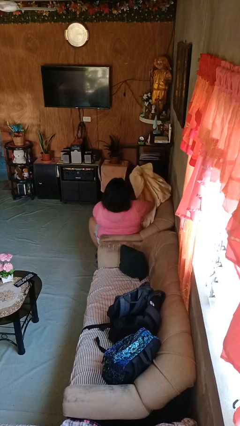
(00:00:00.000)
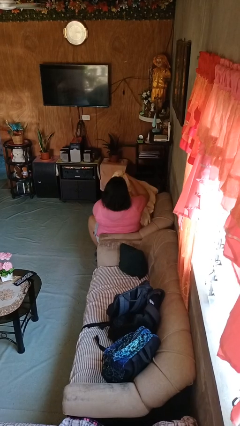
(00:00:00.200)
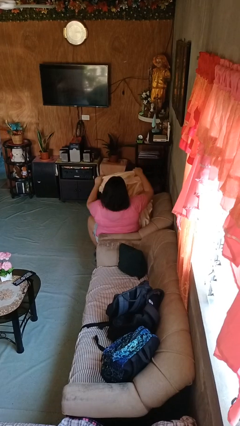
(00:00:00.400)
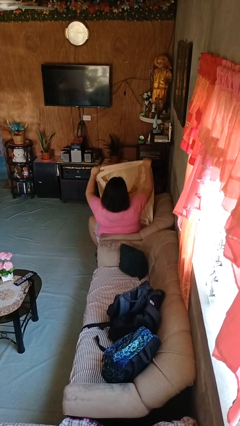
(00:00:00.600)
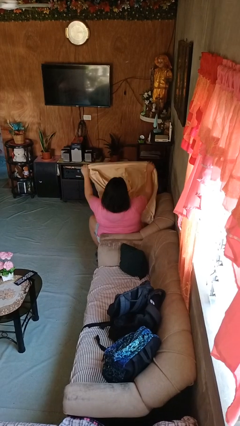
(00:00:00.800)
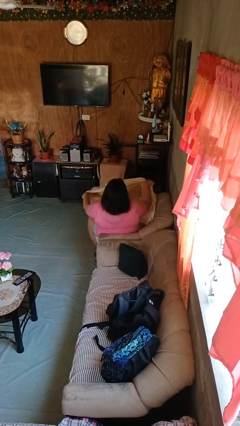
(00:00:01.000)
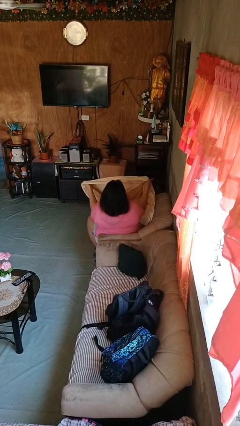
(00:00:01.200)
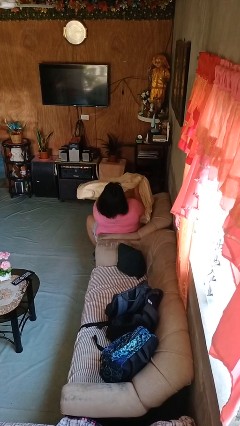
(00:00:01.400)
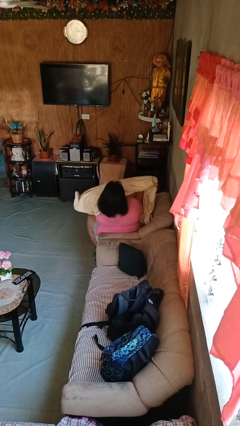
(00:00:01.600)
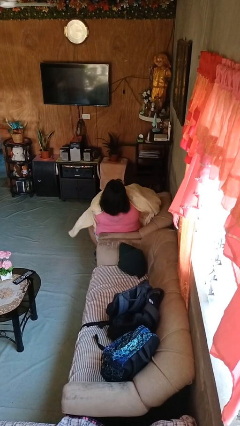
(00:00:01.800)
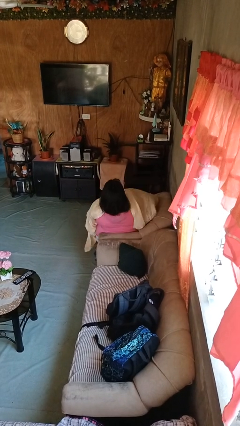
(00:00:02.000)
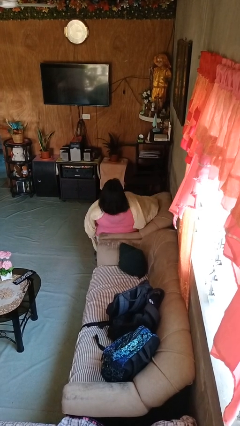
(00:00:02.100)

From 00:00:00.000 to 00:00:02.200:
person covers with blanket

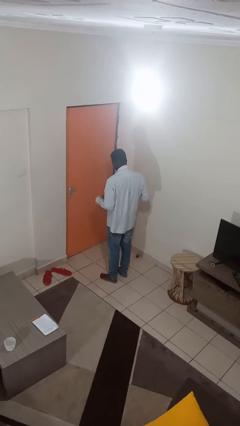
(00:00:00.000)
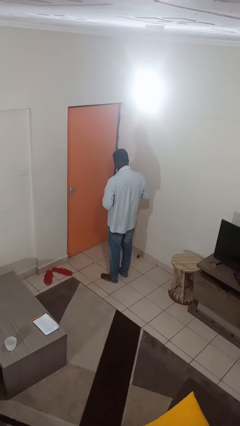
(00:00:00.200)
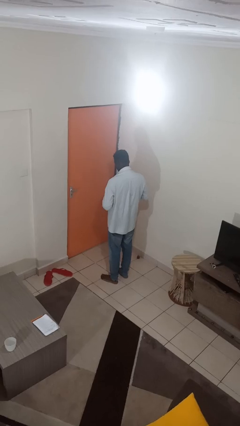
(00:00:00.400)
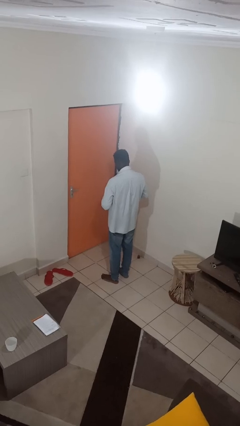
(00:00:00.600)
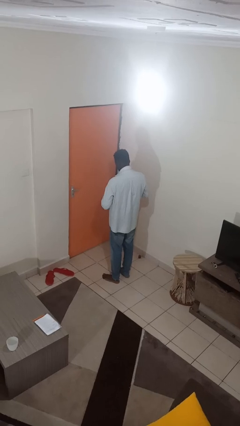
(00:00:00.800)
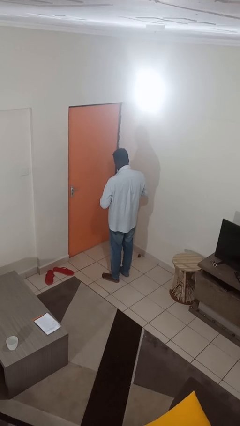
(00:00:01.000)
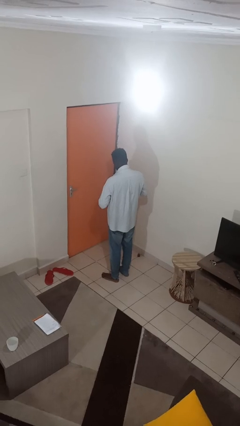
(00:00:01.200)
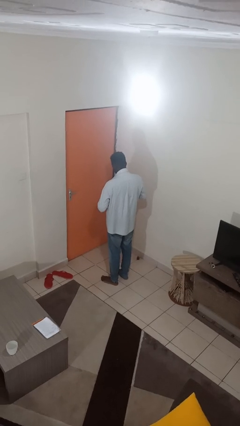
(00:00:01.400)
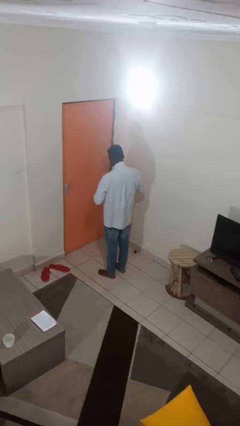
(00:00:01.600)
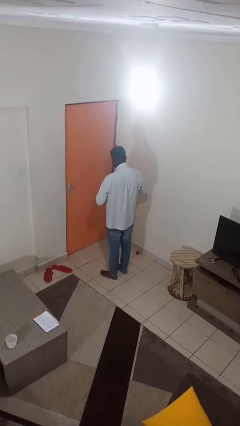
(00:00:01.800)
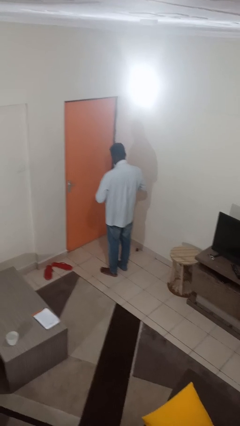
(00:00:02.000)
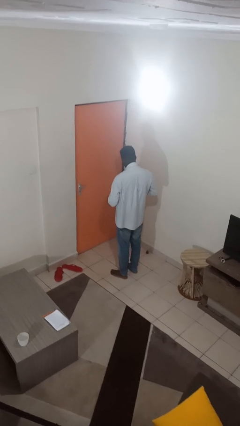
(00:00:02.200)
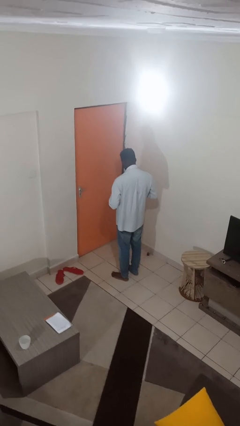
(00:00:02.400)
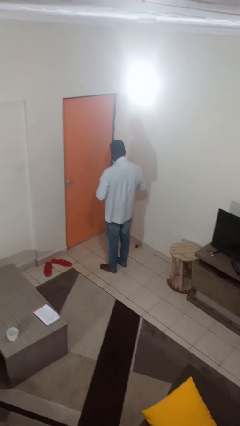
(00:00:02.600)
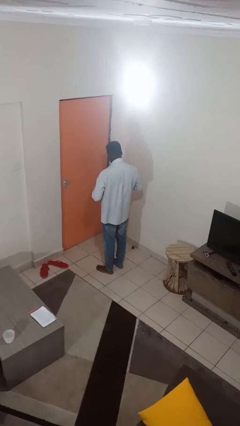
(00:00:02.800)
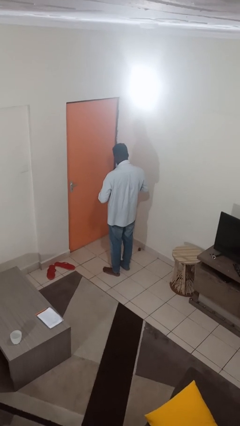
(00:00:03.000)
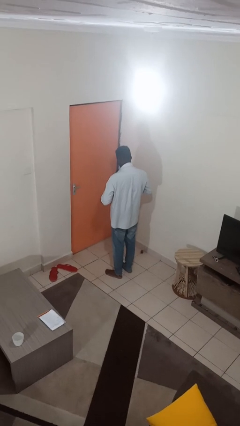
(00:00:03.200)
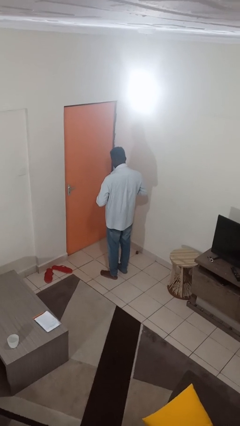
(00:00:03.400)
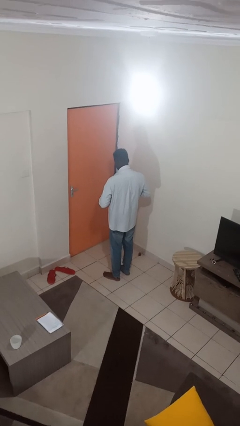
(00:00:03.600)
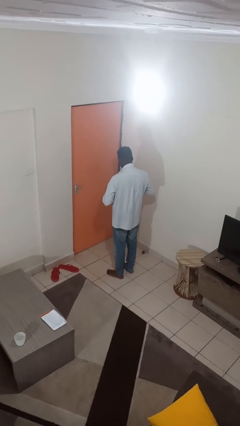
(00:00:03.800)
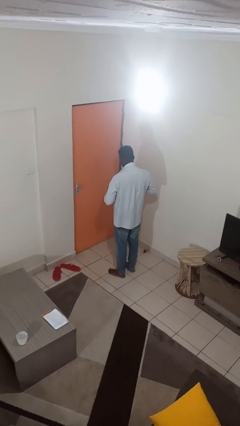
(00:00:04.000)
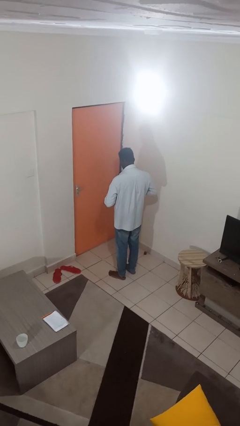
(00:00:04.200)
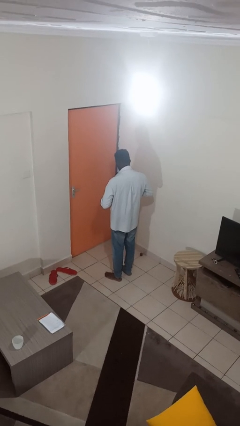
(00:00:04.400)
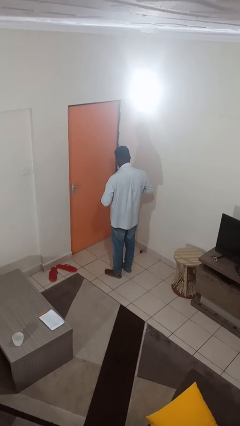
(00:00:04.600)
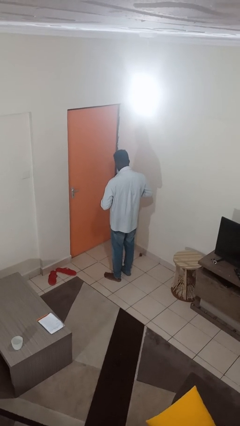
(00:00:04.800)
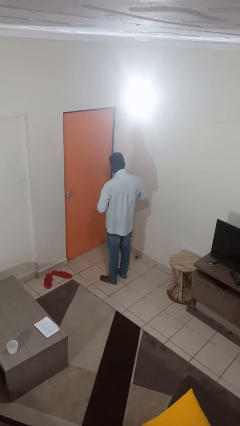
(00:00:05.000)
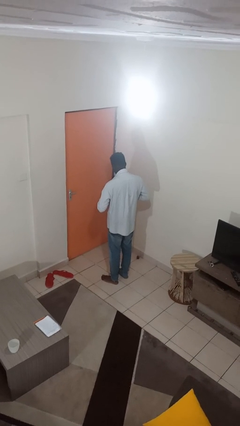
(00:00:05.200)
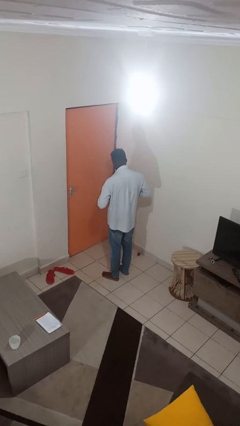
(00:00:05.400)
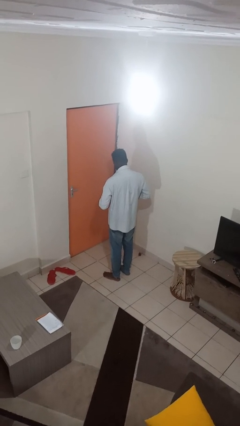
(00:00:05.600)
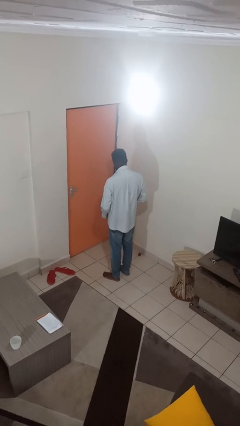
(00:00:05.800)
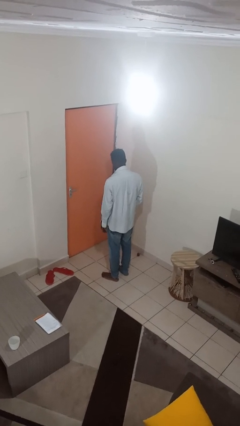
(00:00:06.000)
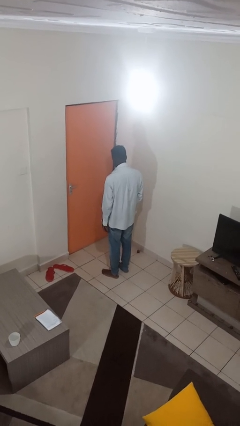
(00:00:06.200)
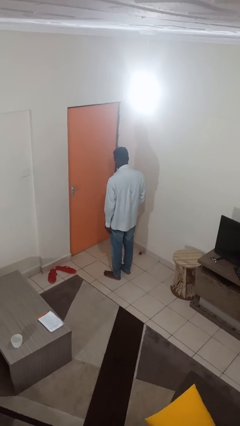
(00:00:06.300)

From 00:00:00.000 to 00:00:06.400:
person buttons shirt

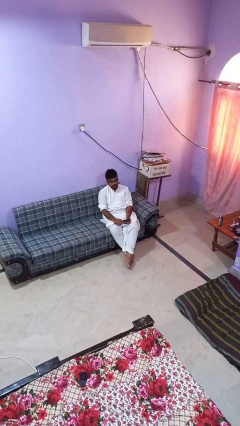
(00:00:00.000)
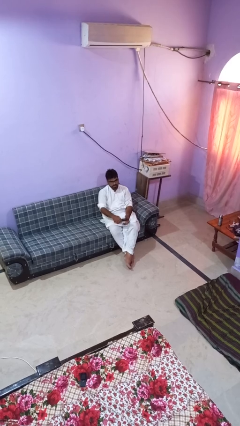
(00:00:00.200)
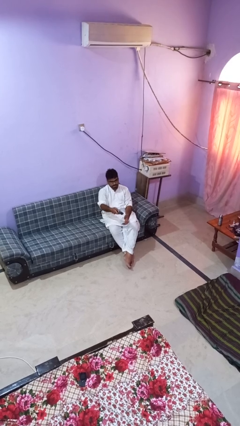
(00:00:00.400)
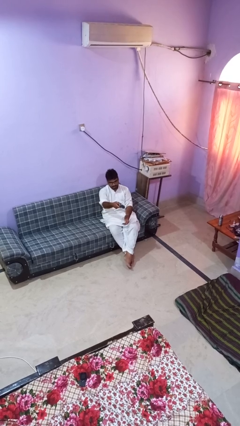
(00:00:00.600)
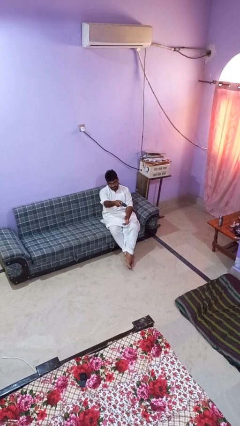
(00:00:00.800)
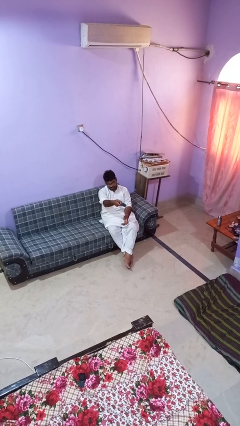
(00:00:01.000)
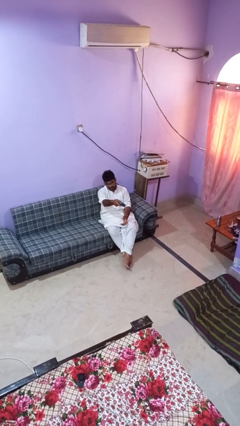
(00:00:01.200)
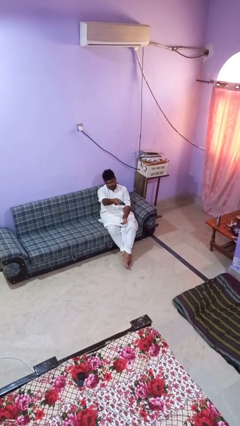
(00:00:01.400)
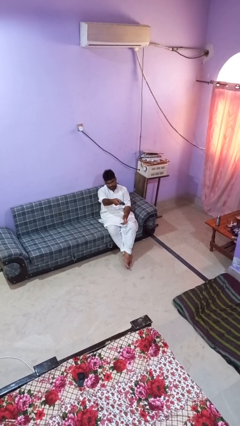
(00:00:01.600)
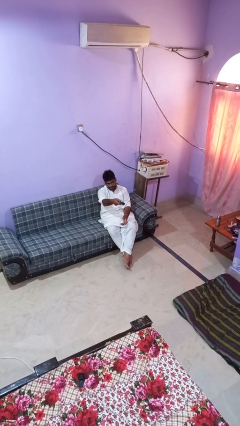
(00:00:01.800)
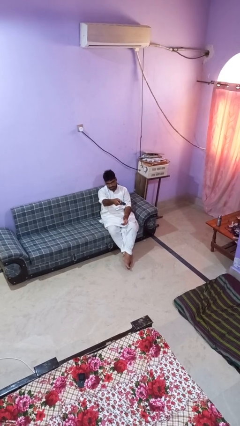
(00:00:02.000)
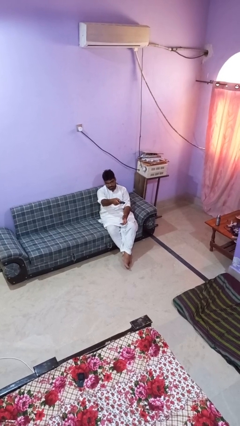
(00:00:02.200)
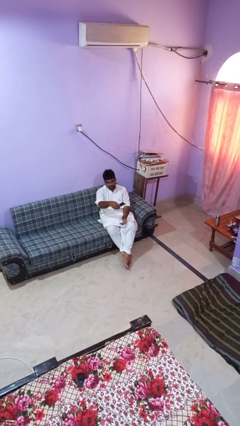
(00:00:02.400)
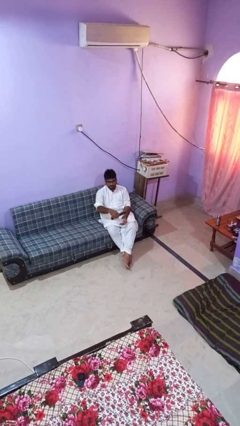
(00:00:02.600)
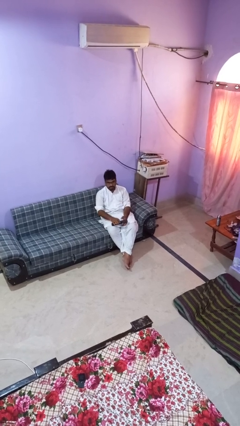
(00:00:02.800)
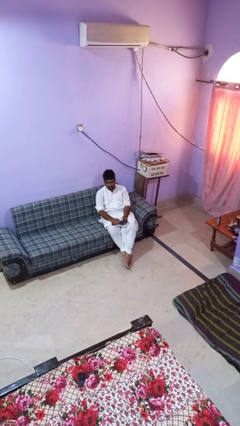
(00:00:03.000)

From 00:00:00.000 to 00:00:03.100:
person uses television remote

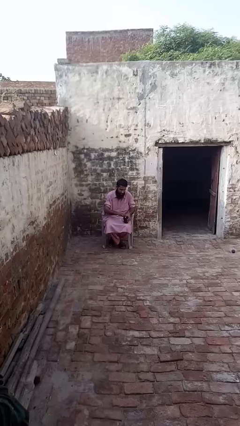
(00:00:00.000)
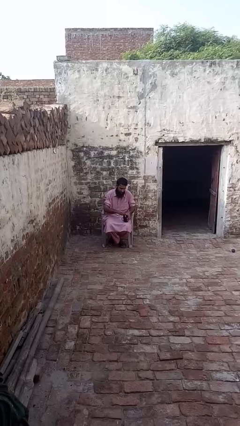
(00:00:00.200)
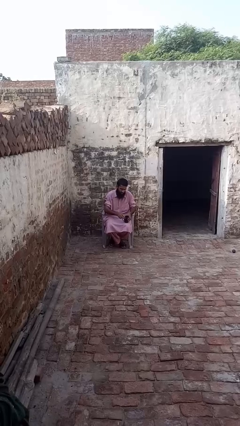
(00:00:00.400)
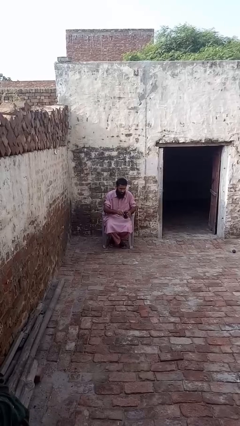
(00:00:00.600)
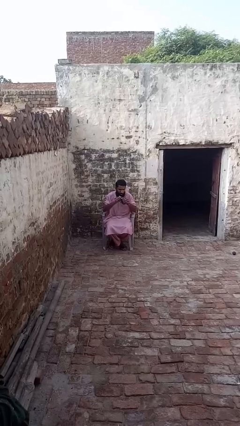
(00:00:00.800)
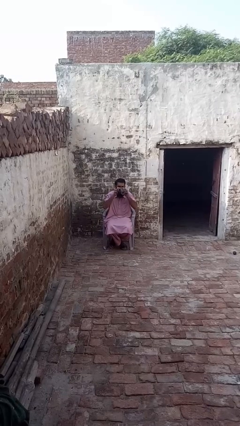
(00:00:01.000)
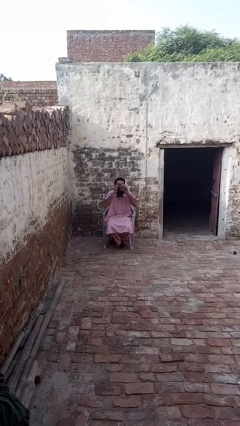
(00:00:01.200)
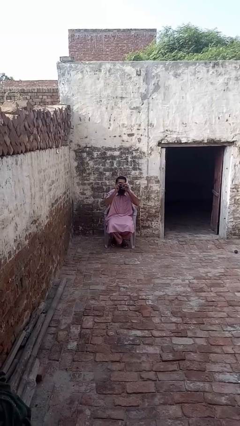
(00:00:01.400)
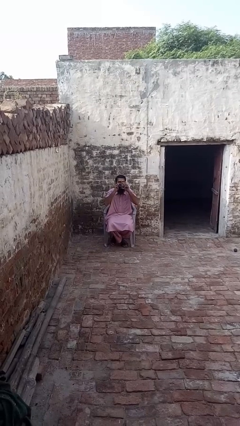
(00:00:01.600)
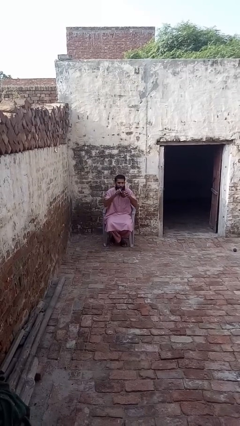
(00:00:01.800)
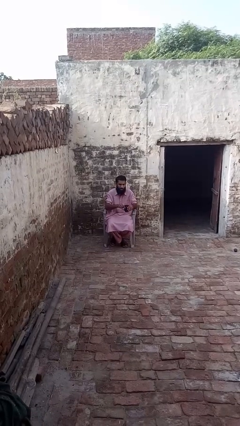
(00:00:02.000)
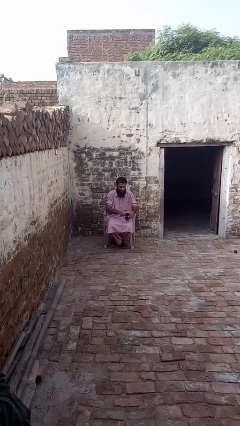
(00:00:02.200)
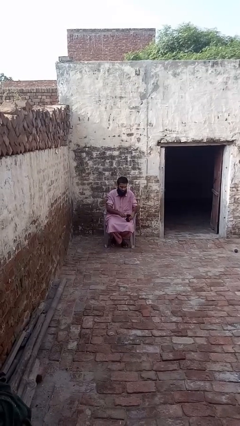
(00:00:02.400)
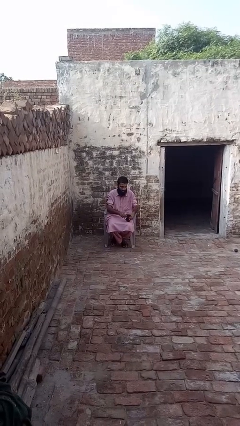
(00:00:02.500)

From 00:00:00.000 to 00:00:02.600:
person drinks from mug

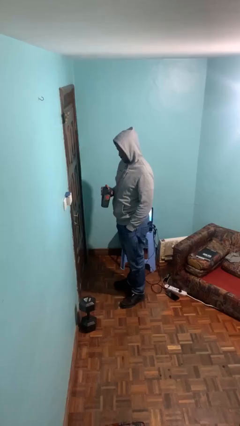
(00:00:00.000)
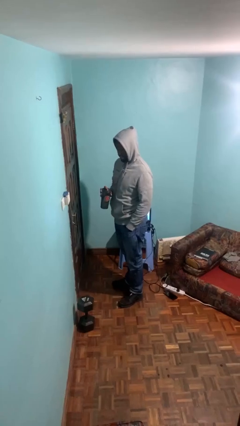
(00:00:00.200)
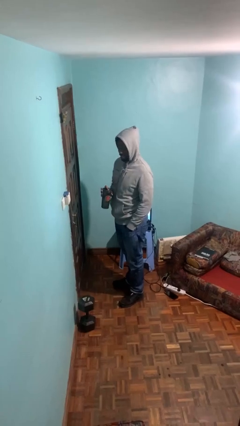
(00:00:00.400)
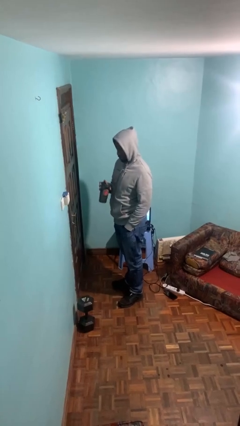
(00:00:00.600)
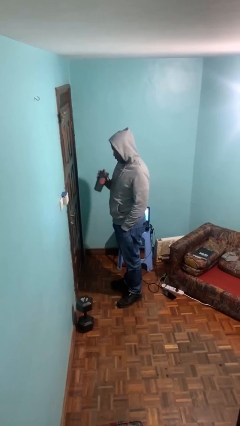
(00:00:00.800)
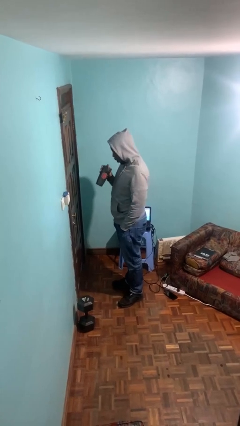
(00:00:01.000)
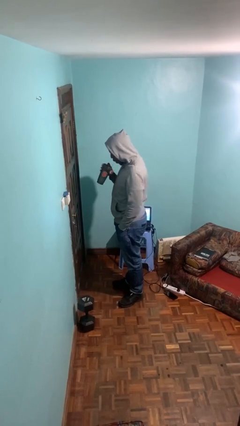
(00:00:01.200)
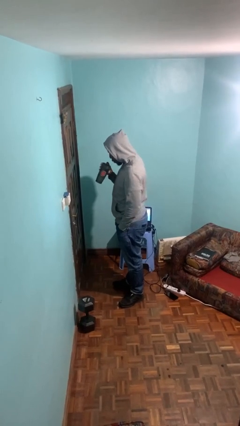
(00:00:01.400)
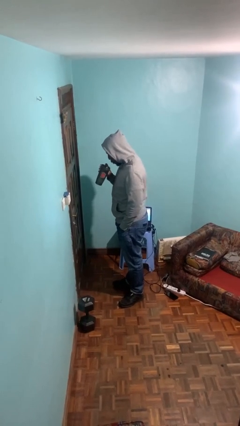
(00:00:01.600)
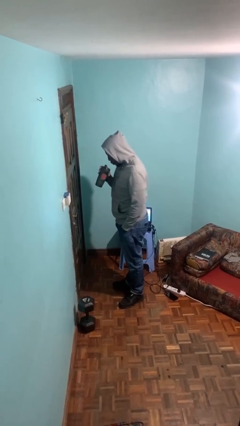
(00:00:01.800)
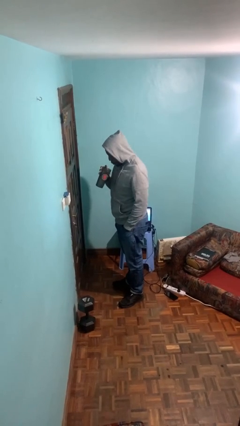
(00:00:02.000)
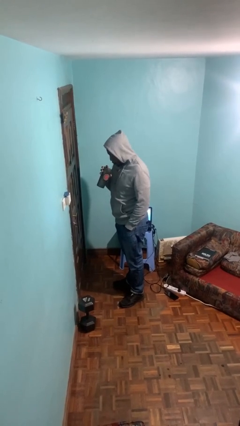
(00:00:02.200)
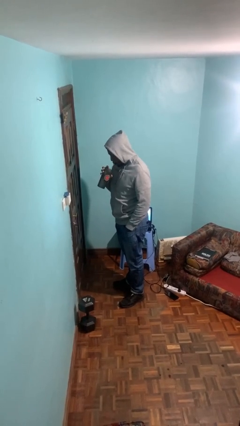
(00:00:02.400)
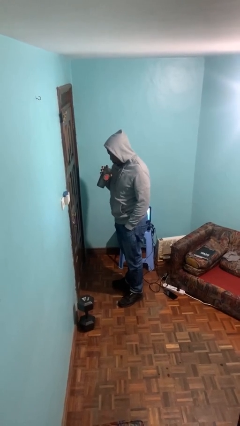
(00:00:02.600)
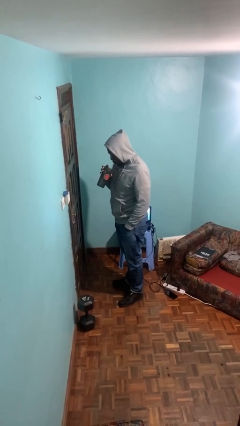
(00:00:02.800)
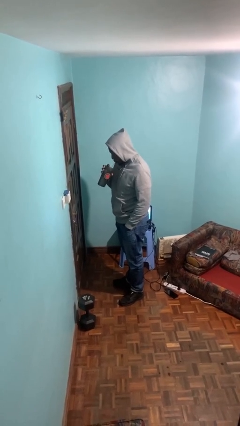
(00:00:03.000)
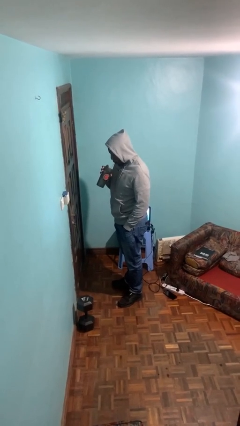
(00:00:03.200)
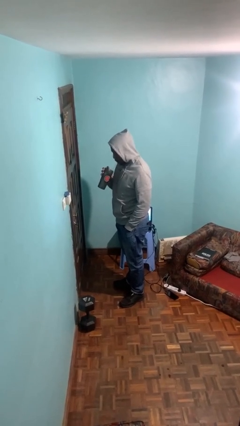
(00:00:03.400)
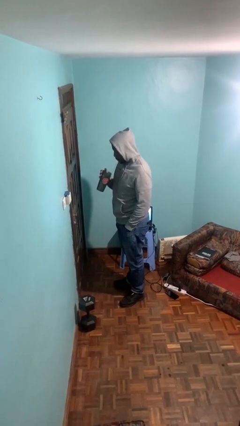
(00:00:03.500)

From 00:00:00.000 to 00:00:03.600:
person drinks from straw
